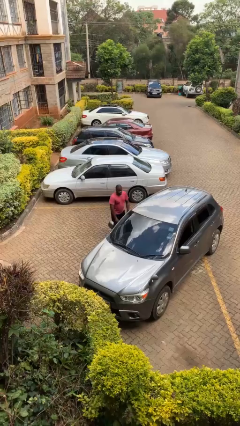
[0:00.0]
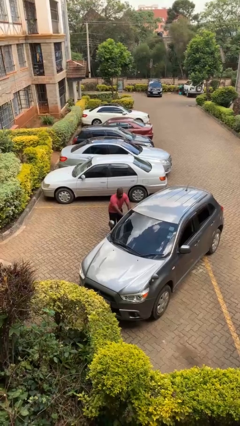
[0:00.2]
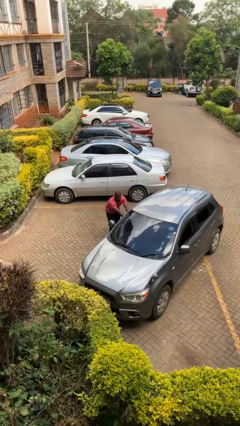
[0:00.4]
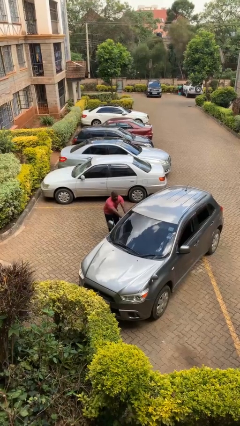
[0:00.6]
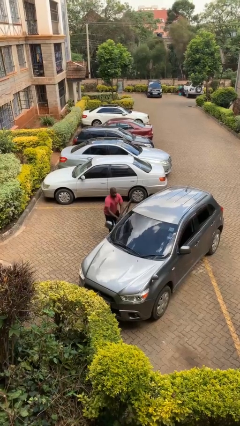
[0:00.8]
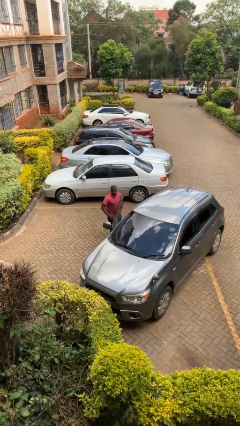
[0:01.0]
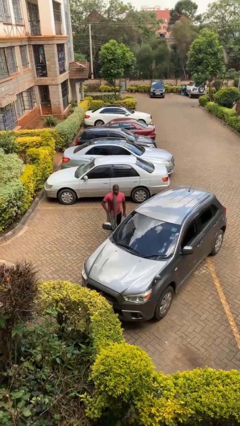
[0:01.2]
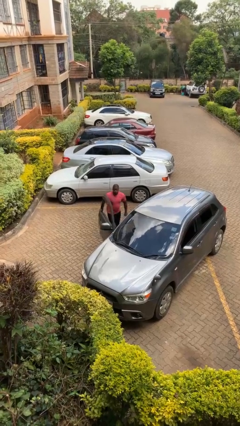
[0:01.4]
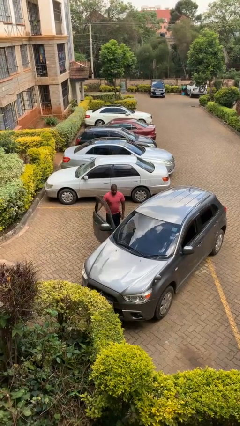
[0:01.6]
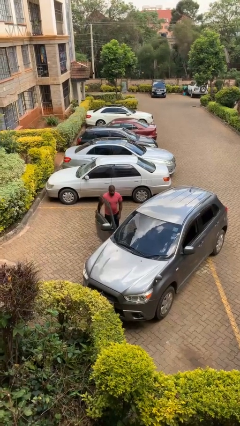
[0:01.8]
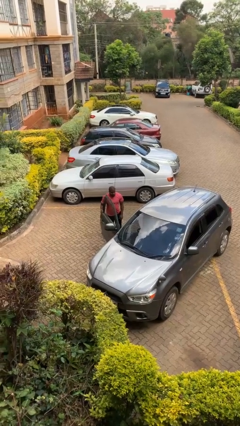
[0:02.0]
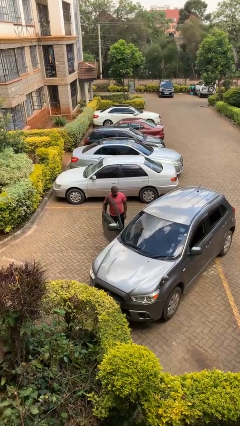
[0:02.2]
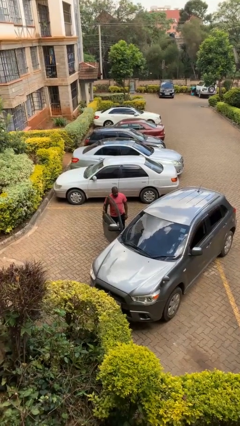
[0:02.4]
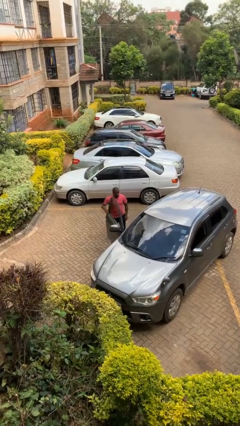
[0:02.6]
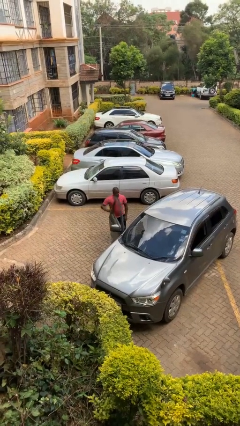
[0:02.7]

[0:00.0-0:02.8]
person opens car door

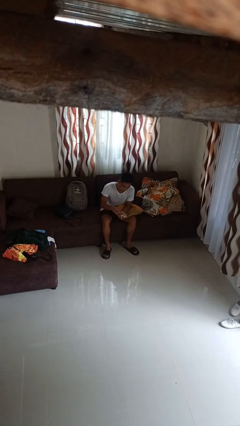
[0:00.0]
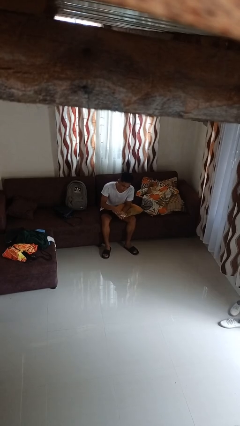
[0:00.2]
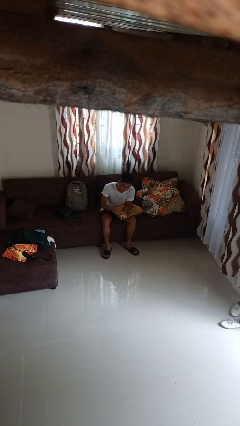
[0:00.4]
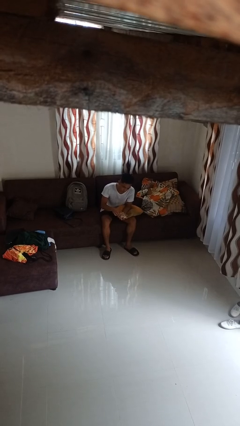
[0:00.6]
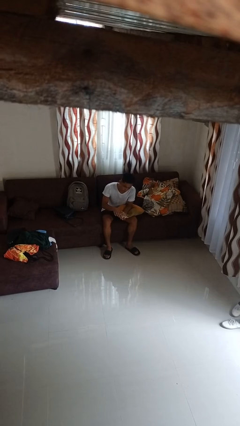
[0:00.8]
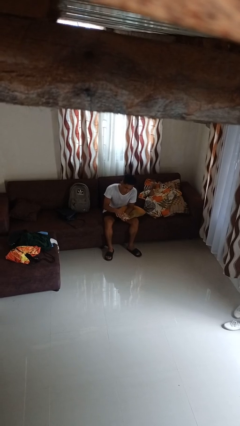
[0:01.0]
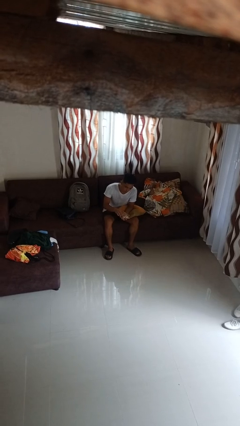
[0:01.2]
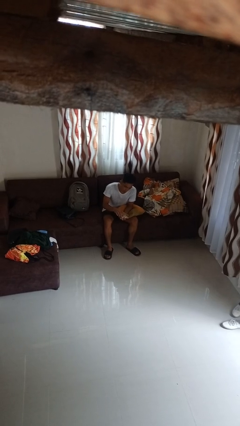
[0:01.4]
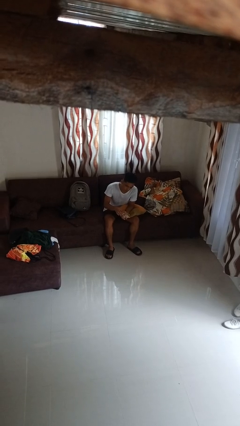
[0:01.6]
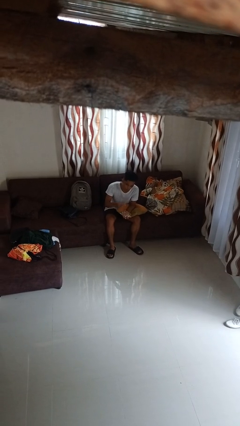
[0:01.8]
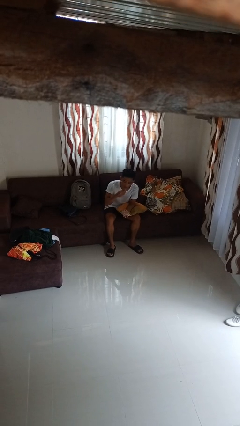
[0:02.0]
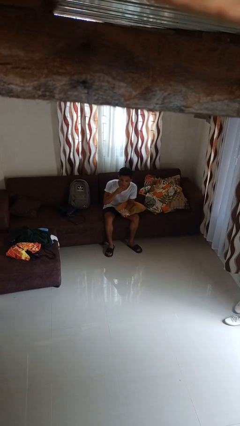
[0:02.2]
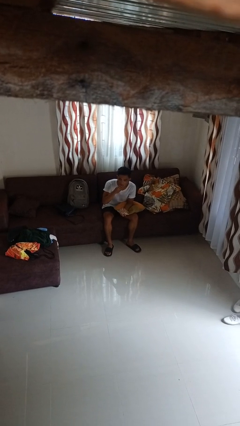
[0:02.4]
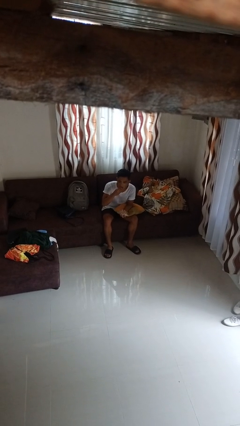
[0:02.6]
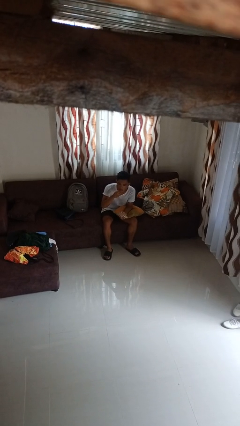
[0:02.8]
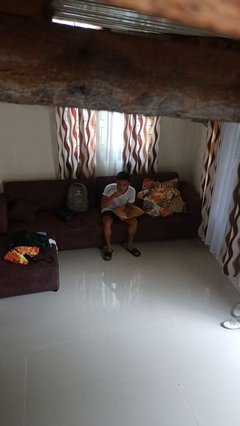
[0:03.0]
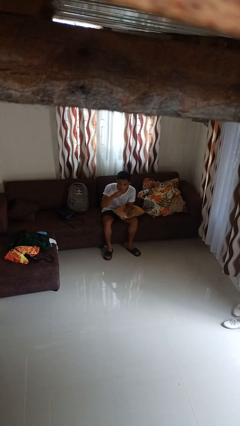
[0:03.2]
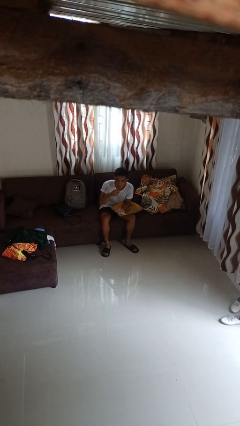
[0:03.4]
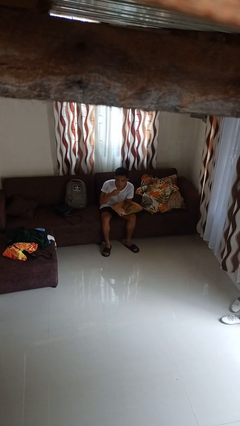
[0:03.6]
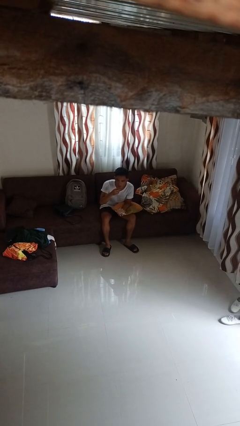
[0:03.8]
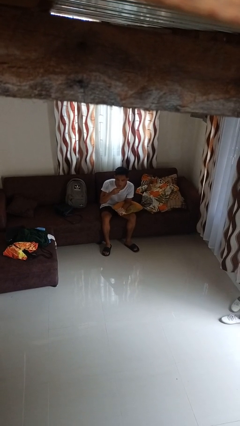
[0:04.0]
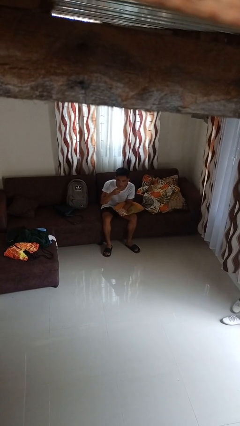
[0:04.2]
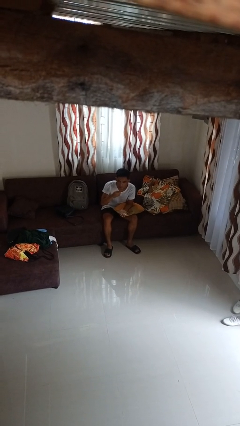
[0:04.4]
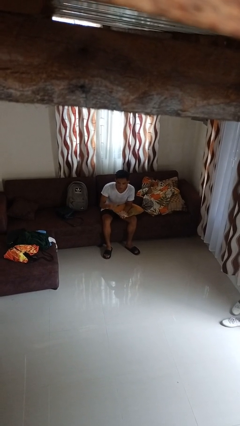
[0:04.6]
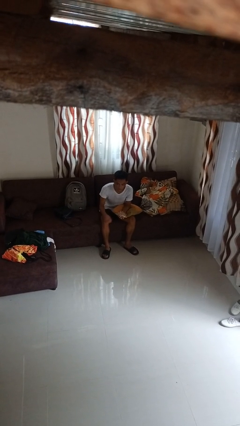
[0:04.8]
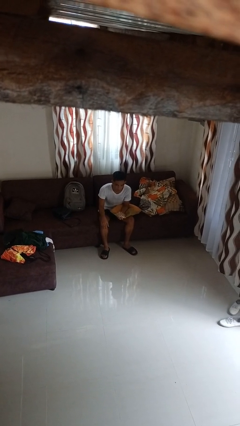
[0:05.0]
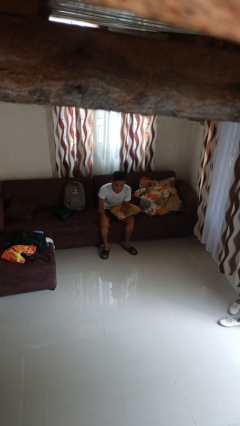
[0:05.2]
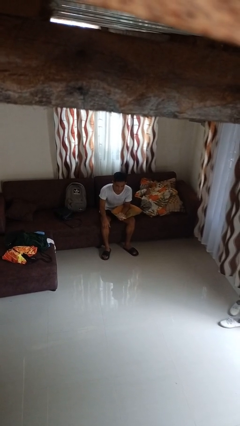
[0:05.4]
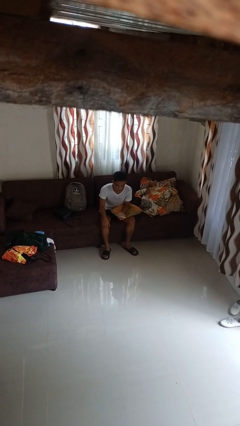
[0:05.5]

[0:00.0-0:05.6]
person eats snack from bag

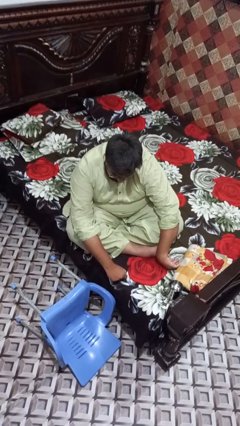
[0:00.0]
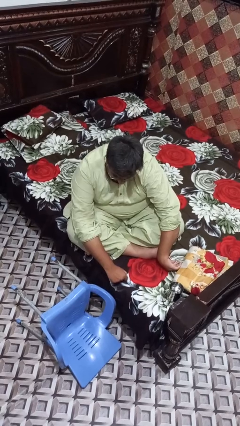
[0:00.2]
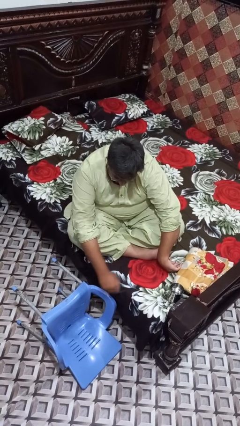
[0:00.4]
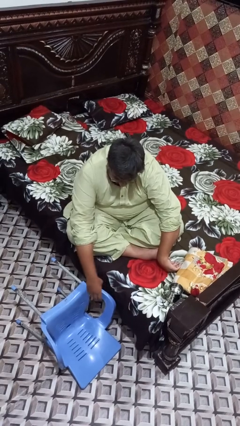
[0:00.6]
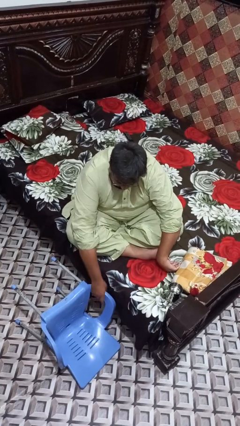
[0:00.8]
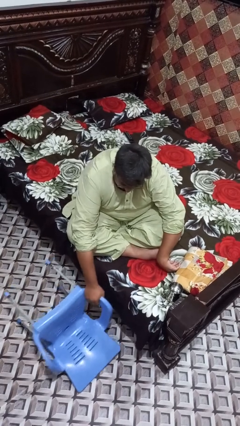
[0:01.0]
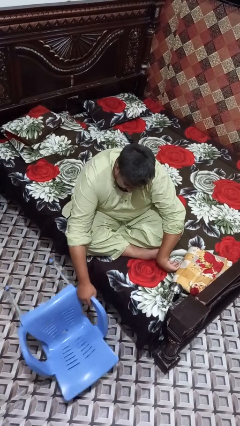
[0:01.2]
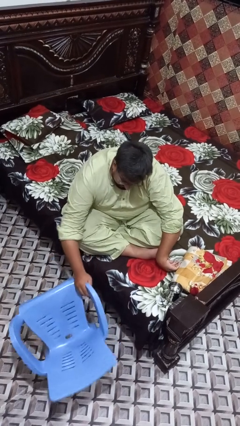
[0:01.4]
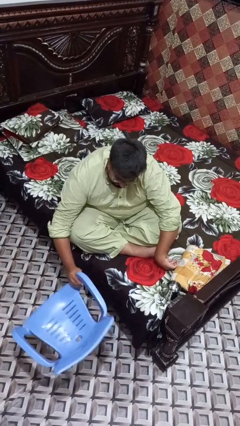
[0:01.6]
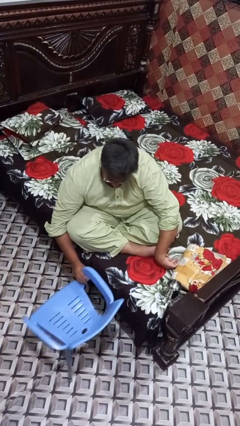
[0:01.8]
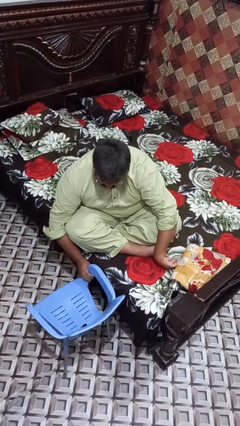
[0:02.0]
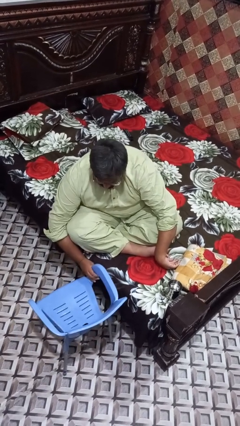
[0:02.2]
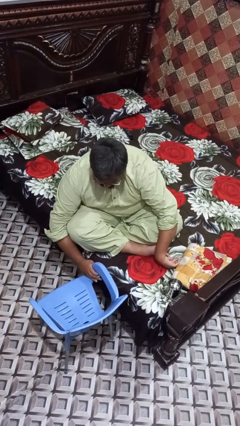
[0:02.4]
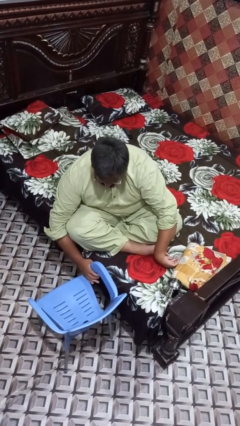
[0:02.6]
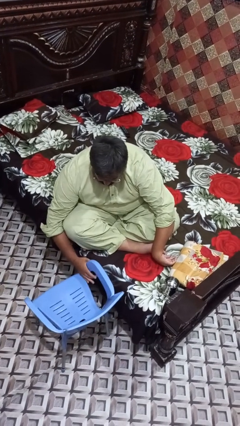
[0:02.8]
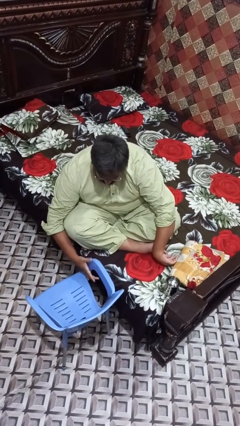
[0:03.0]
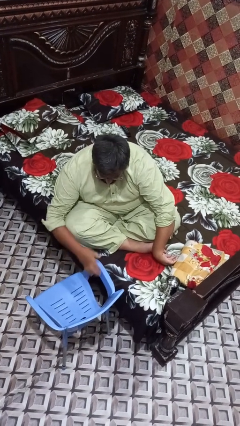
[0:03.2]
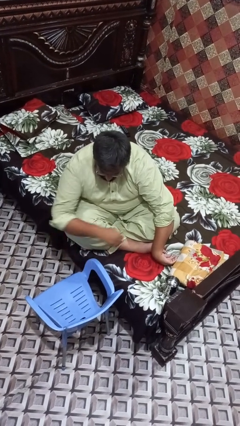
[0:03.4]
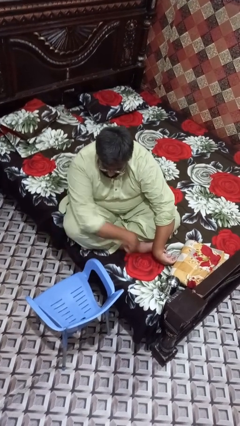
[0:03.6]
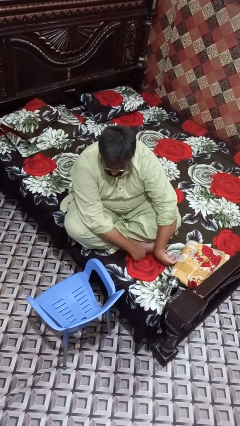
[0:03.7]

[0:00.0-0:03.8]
person sets upright furniture

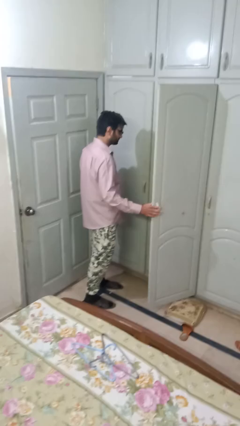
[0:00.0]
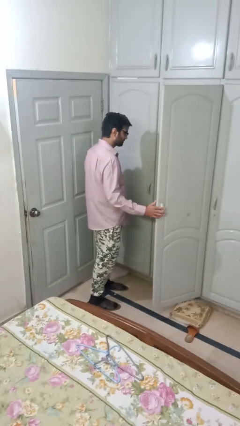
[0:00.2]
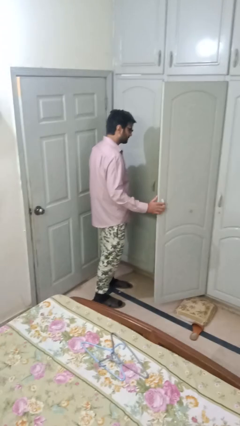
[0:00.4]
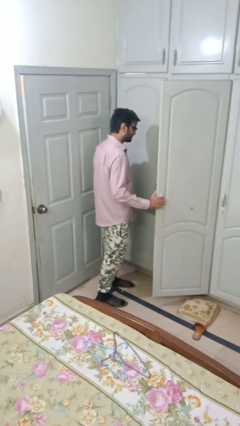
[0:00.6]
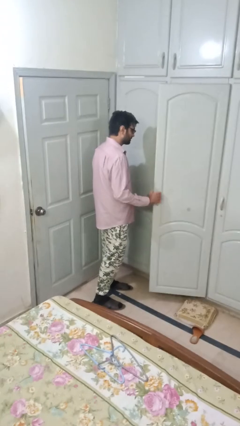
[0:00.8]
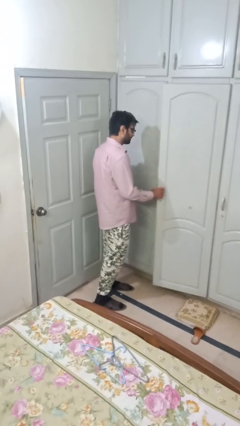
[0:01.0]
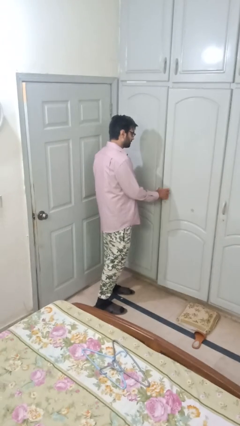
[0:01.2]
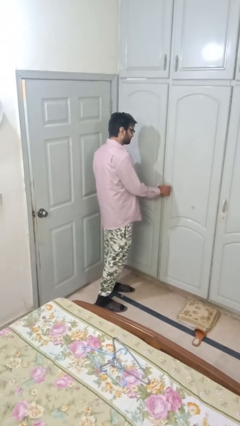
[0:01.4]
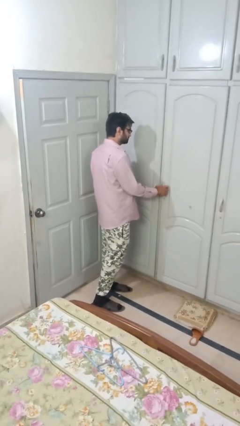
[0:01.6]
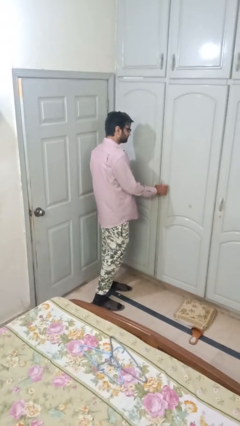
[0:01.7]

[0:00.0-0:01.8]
person closes closet door

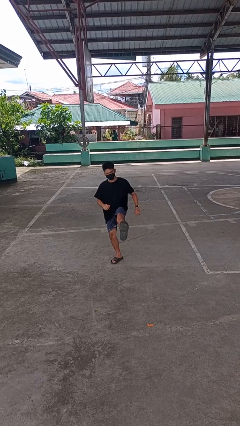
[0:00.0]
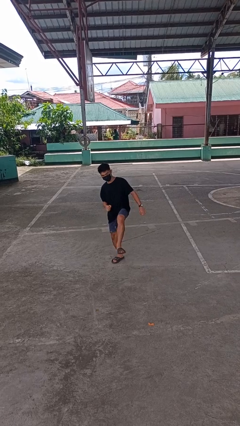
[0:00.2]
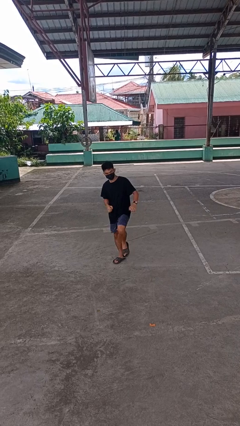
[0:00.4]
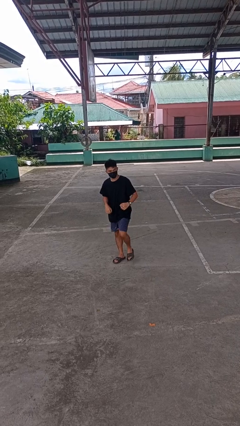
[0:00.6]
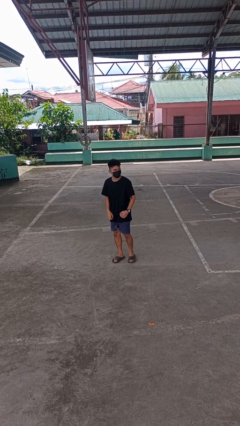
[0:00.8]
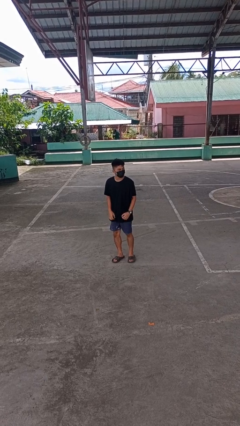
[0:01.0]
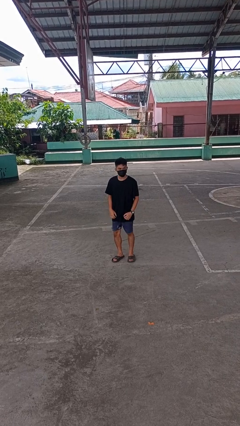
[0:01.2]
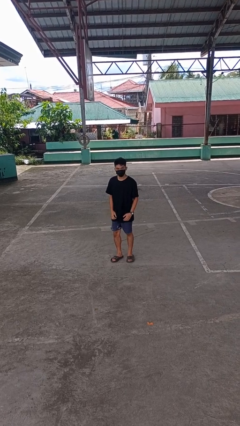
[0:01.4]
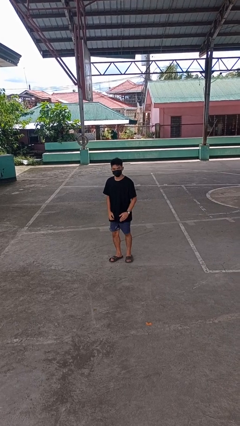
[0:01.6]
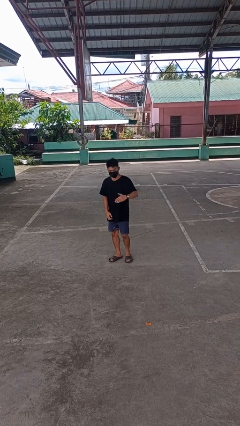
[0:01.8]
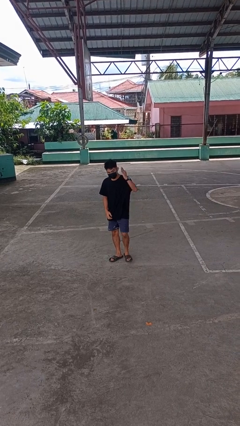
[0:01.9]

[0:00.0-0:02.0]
person karate kicks

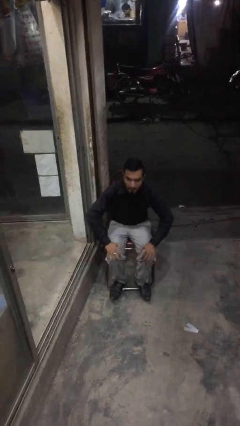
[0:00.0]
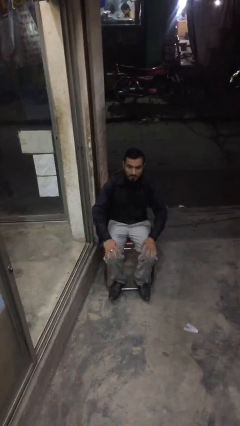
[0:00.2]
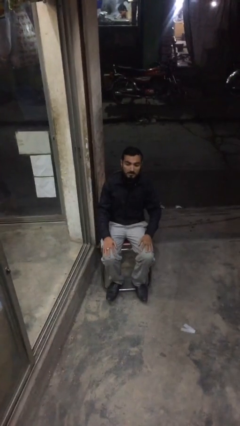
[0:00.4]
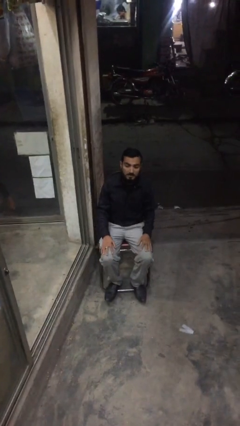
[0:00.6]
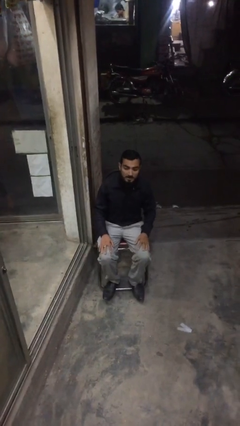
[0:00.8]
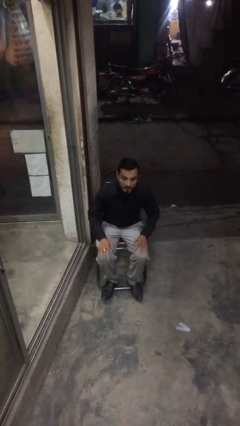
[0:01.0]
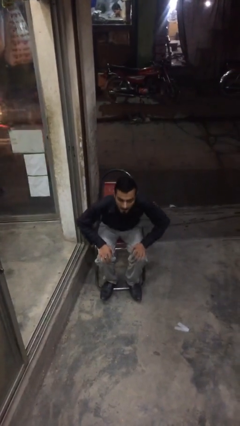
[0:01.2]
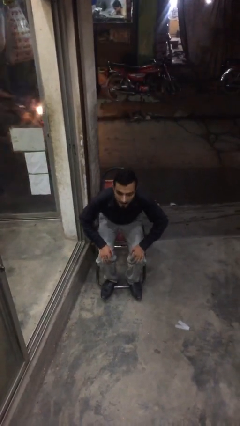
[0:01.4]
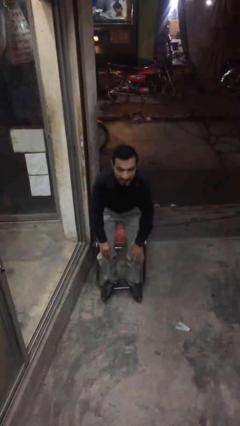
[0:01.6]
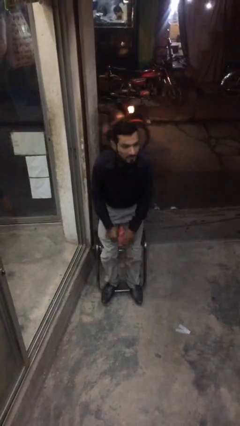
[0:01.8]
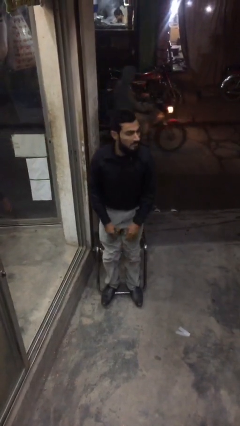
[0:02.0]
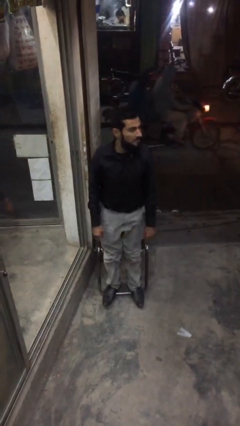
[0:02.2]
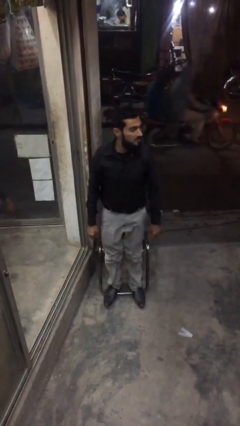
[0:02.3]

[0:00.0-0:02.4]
person stands up
